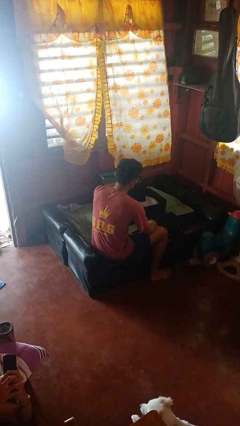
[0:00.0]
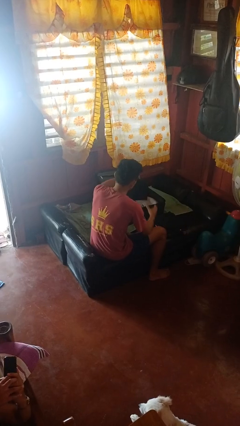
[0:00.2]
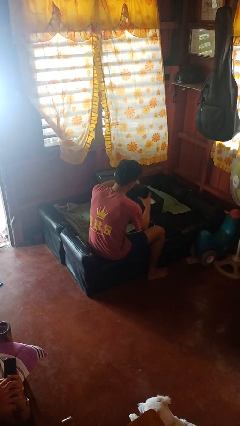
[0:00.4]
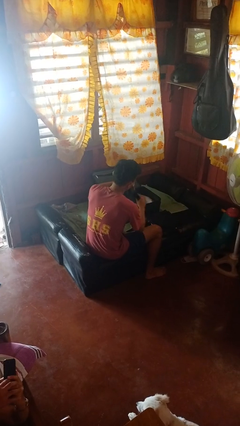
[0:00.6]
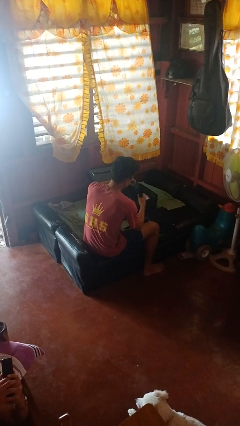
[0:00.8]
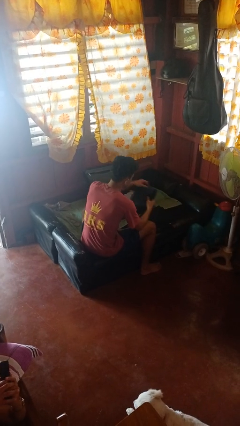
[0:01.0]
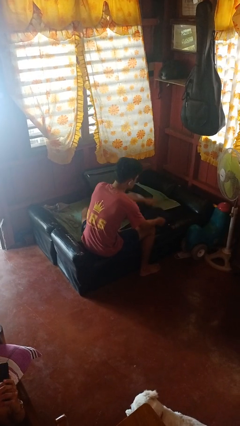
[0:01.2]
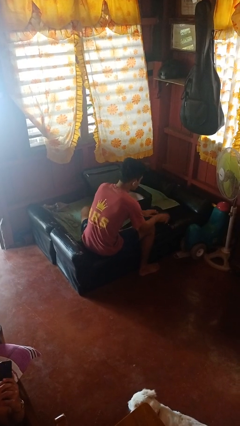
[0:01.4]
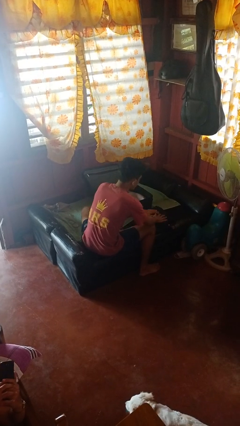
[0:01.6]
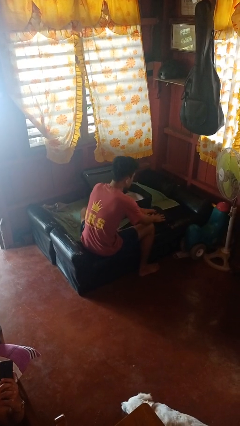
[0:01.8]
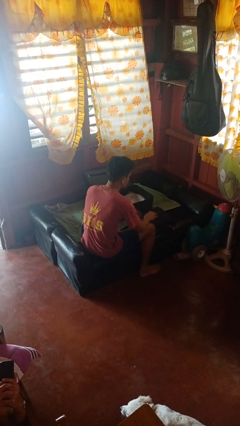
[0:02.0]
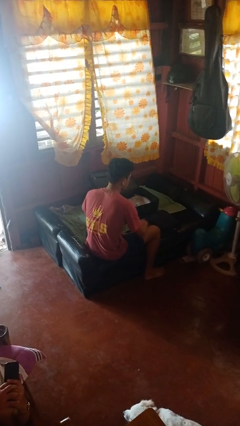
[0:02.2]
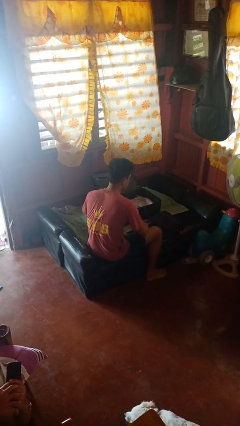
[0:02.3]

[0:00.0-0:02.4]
person unloads clothes from suitcase

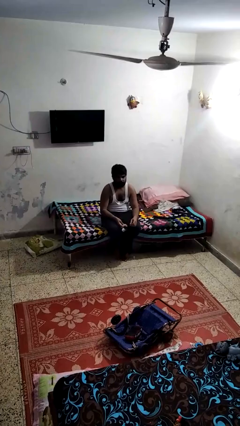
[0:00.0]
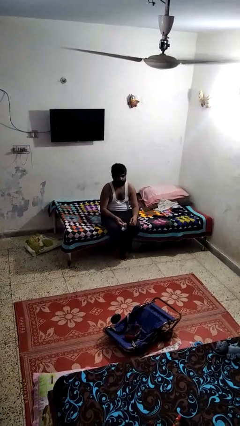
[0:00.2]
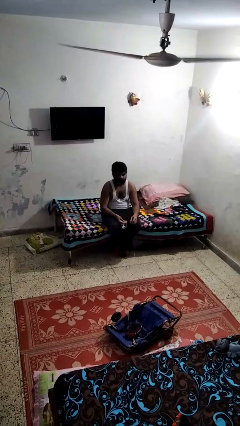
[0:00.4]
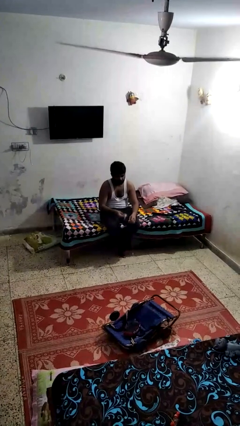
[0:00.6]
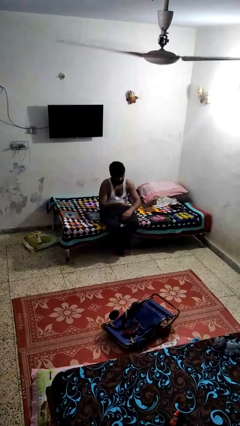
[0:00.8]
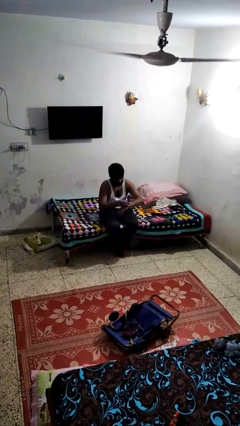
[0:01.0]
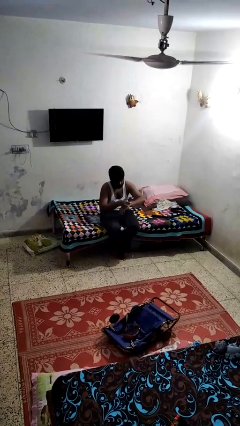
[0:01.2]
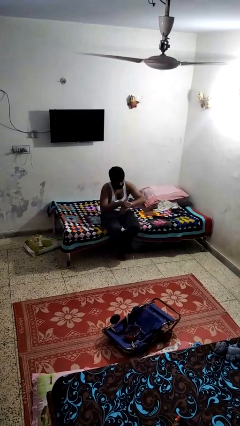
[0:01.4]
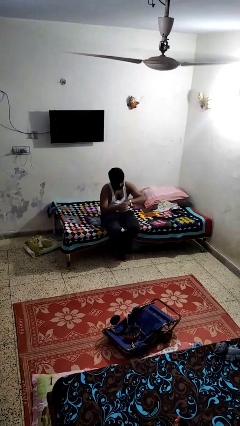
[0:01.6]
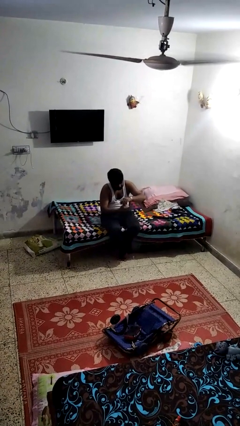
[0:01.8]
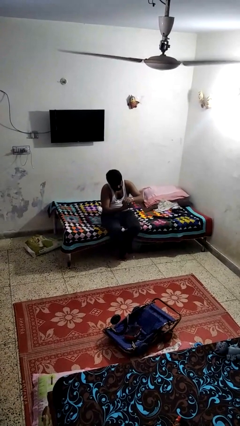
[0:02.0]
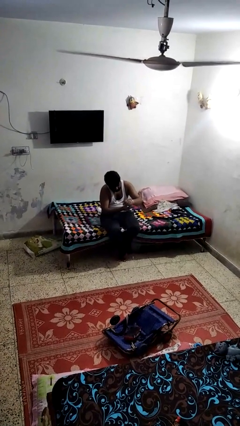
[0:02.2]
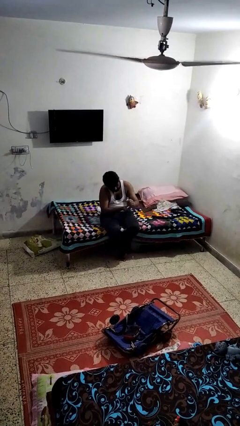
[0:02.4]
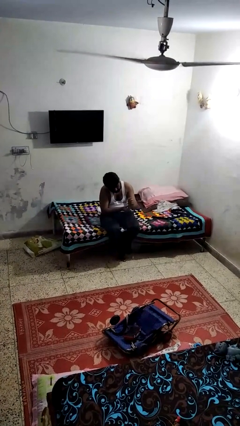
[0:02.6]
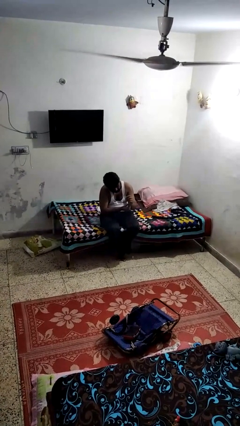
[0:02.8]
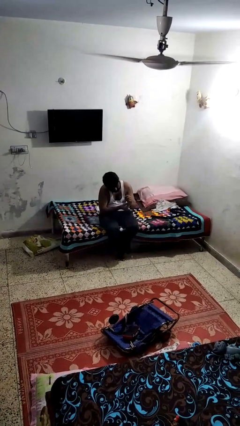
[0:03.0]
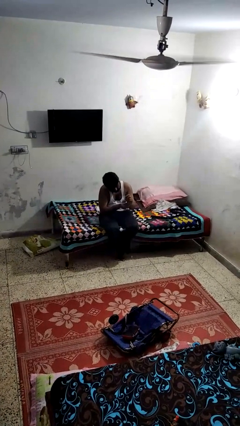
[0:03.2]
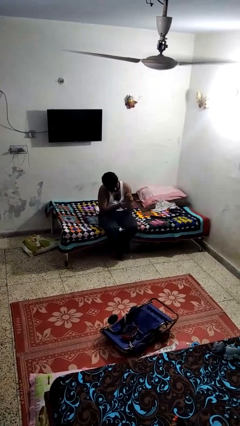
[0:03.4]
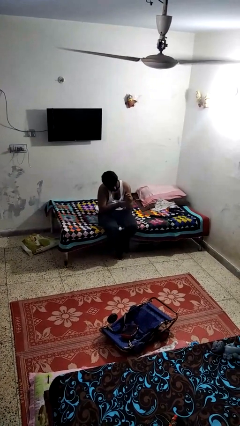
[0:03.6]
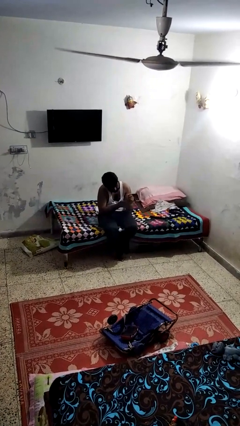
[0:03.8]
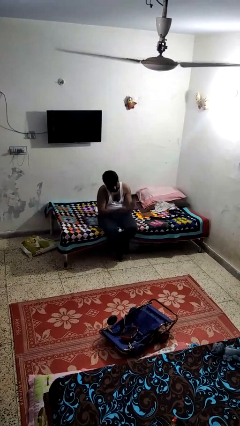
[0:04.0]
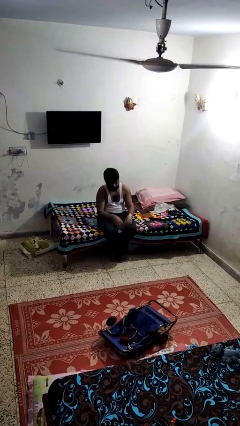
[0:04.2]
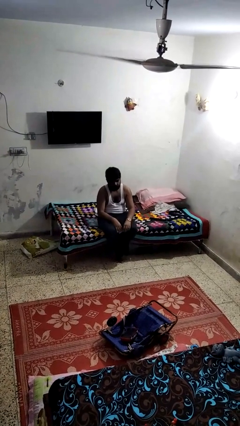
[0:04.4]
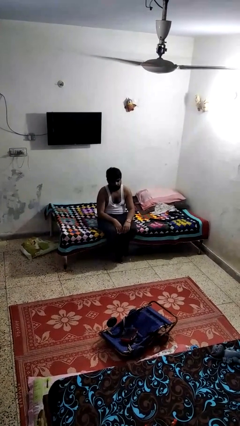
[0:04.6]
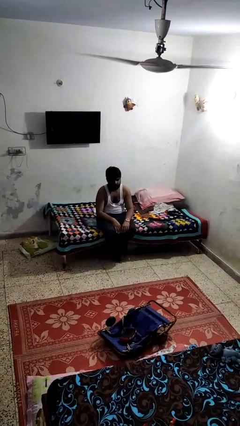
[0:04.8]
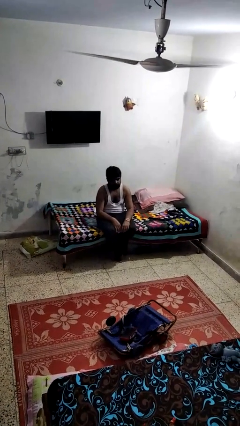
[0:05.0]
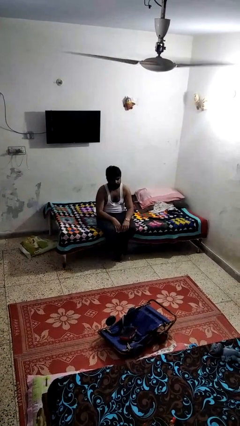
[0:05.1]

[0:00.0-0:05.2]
person puts on wristwatch

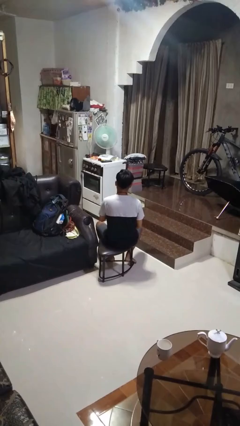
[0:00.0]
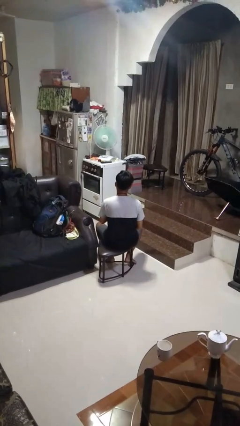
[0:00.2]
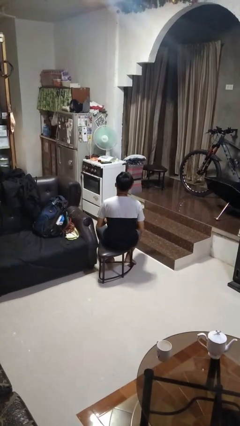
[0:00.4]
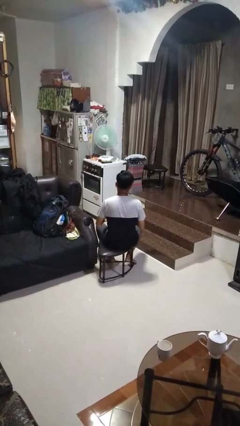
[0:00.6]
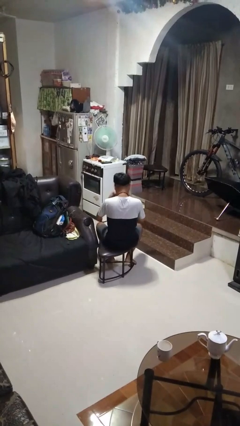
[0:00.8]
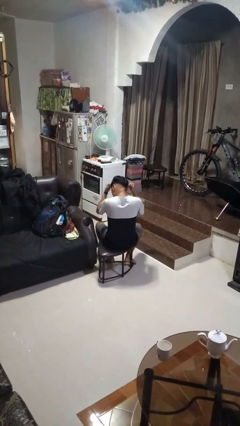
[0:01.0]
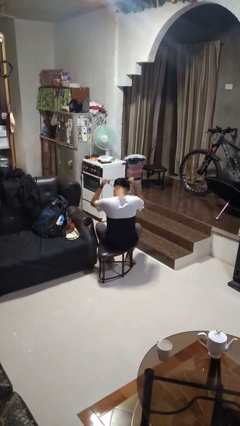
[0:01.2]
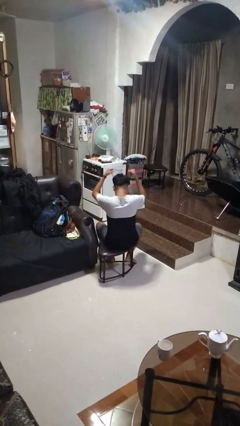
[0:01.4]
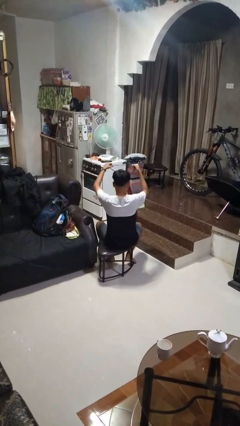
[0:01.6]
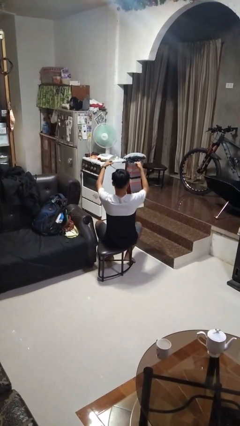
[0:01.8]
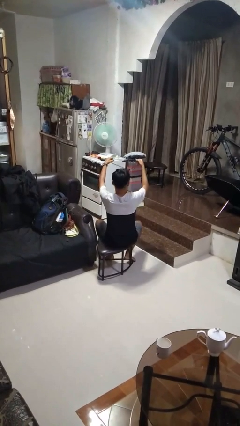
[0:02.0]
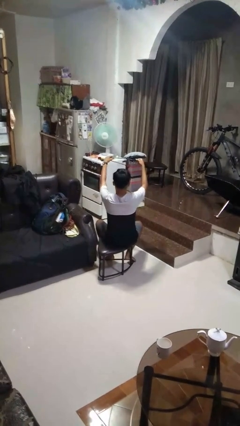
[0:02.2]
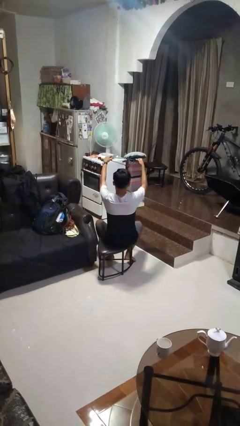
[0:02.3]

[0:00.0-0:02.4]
person takes off necktie

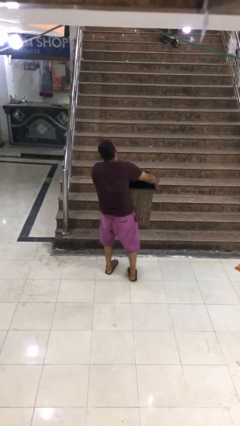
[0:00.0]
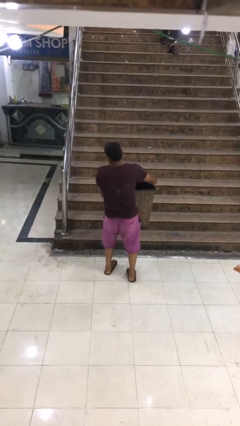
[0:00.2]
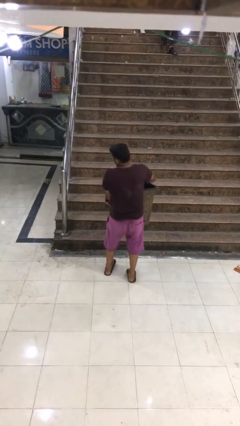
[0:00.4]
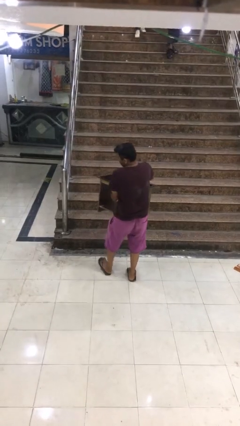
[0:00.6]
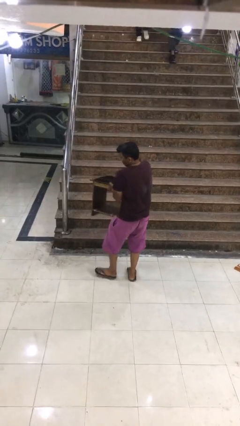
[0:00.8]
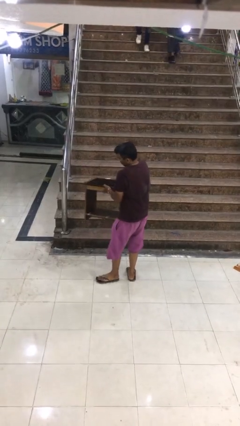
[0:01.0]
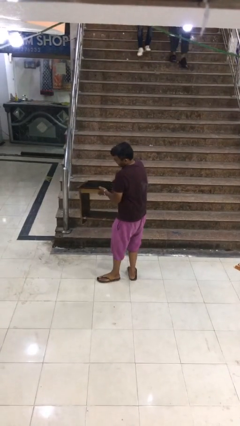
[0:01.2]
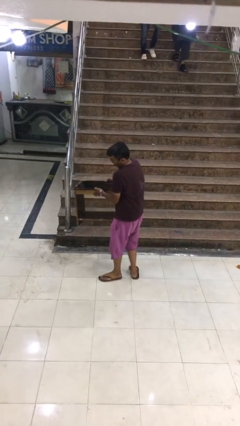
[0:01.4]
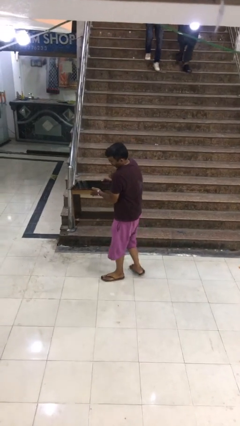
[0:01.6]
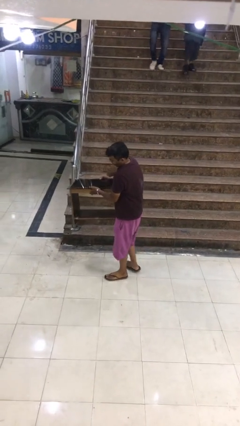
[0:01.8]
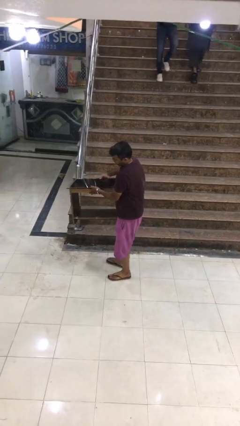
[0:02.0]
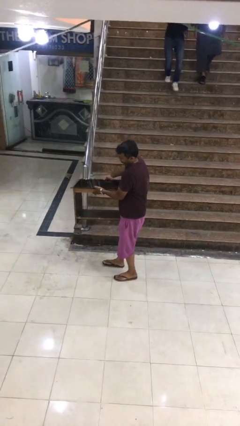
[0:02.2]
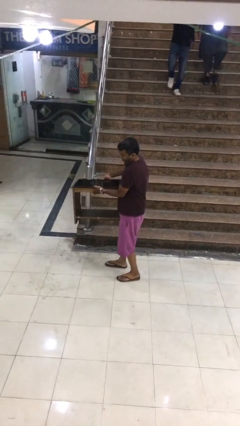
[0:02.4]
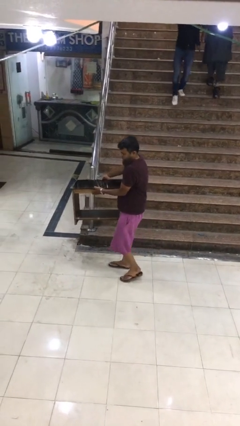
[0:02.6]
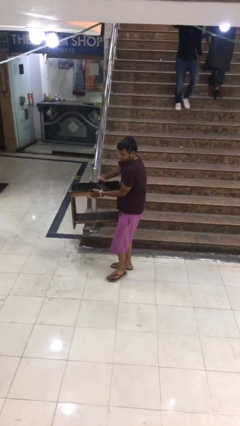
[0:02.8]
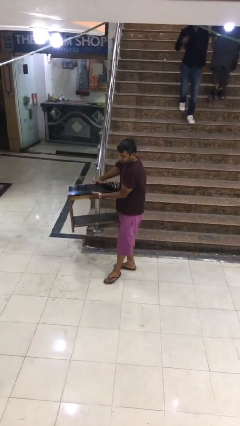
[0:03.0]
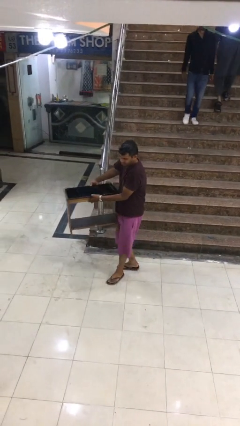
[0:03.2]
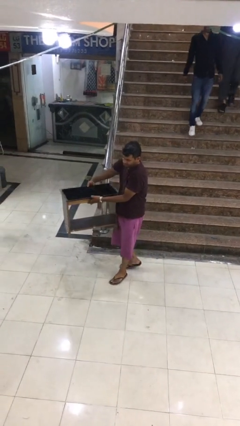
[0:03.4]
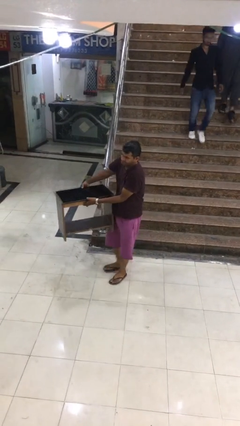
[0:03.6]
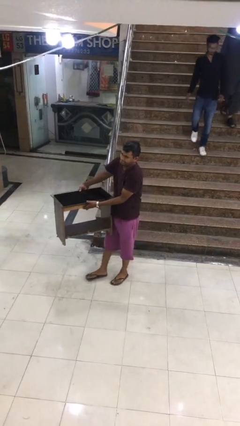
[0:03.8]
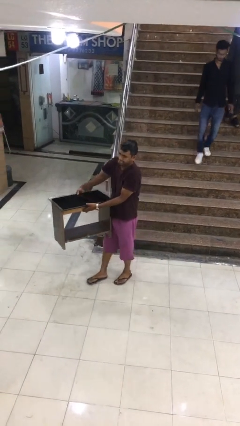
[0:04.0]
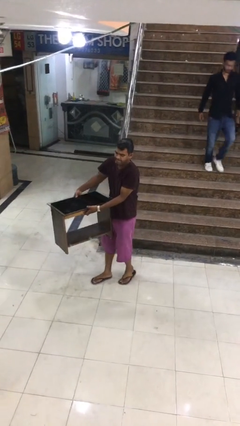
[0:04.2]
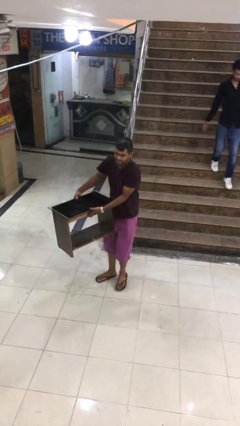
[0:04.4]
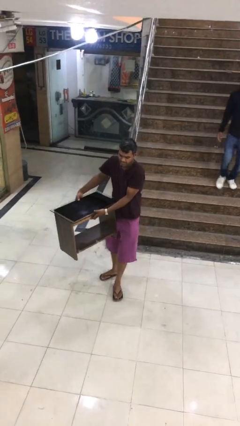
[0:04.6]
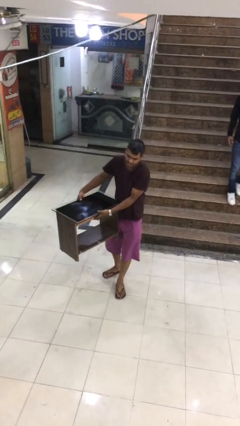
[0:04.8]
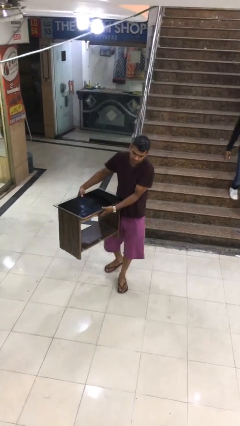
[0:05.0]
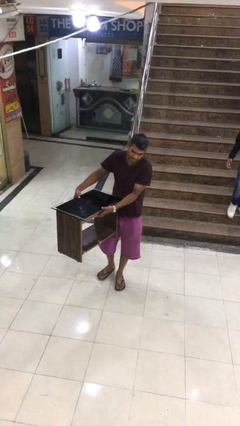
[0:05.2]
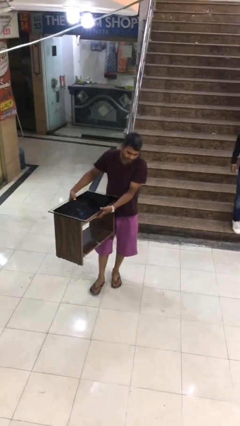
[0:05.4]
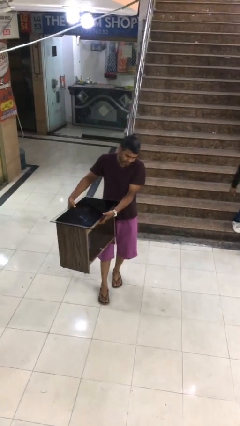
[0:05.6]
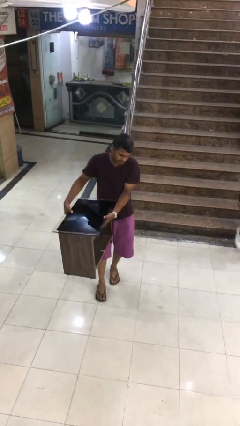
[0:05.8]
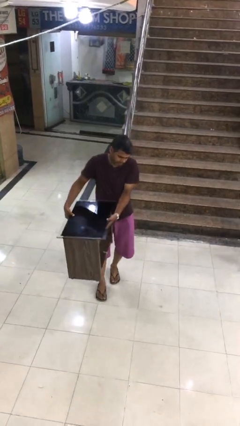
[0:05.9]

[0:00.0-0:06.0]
person carries heavy object

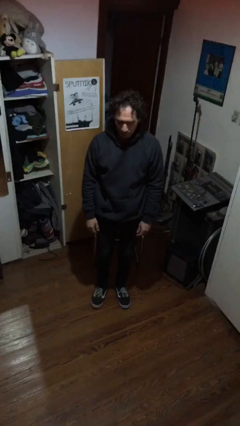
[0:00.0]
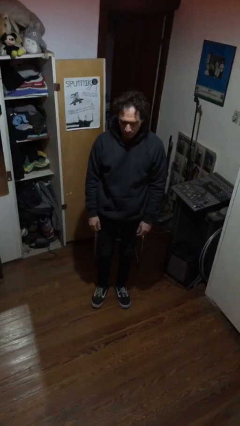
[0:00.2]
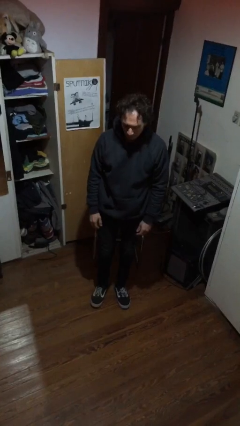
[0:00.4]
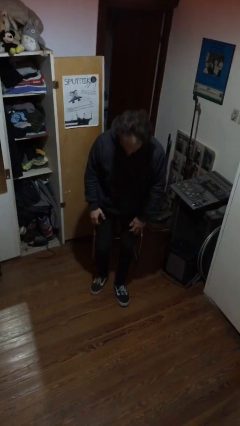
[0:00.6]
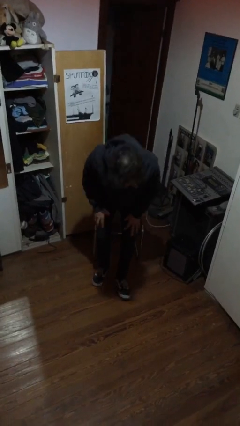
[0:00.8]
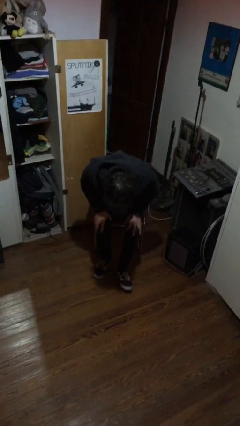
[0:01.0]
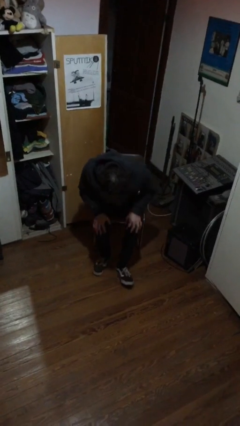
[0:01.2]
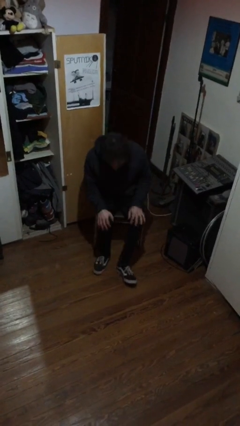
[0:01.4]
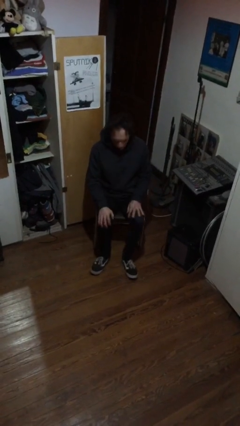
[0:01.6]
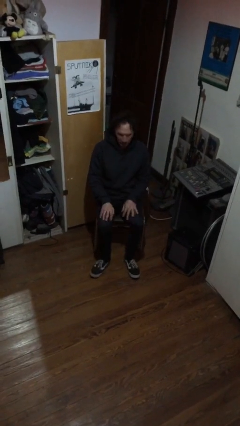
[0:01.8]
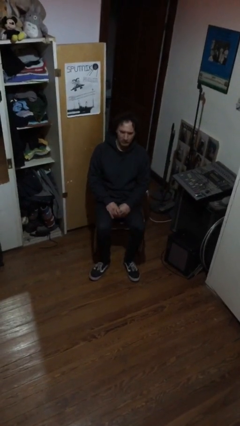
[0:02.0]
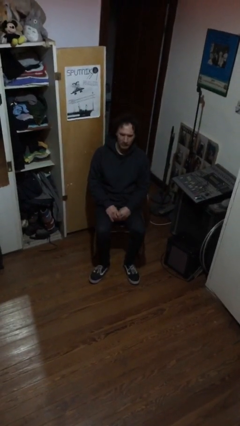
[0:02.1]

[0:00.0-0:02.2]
person sits down
